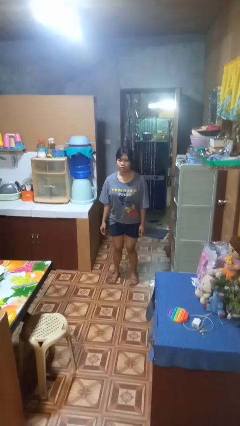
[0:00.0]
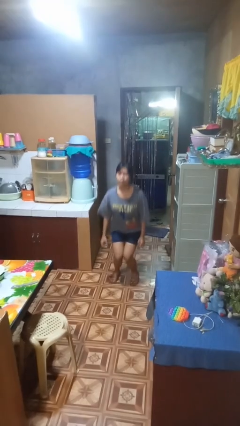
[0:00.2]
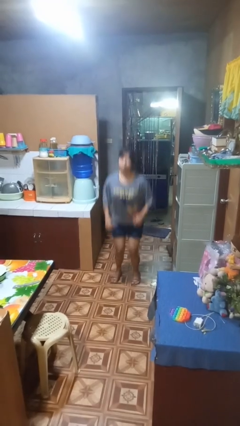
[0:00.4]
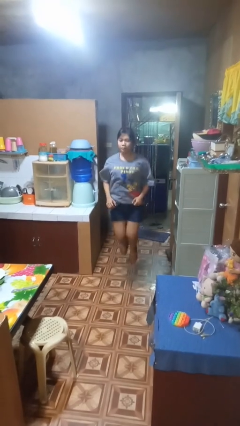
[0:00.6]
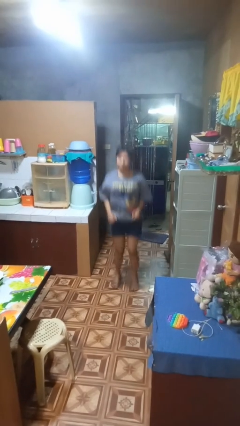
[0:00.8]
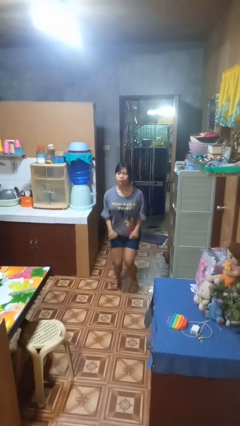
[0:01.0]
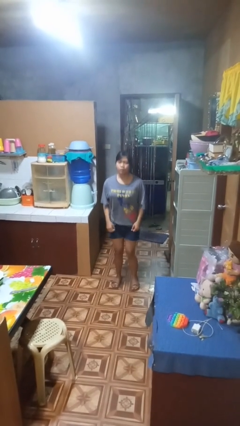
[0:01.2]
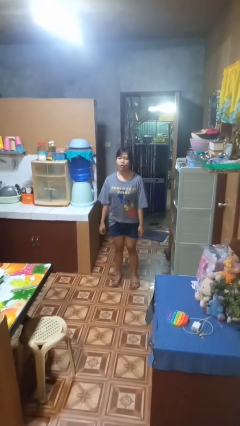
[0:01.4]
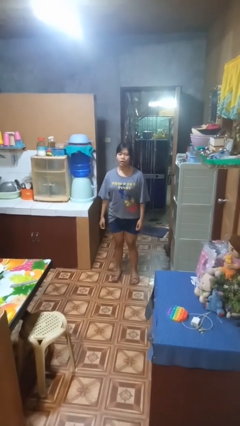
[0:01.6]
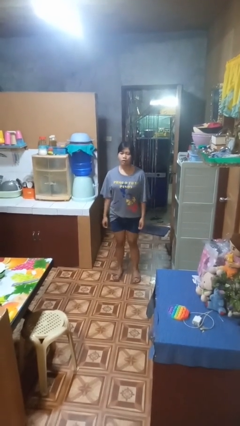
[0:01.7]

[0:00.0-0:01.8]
person jumps

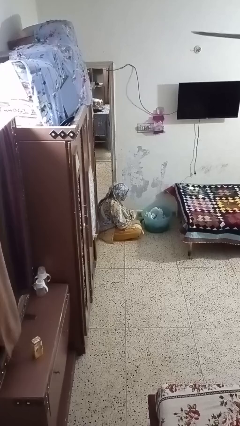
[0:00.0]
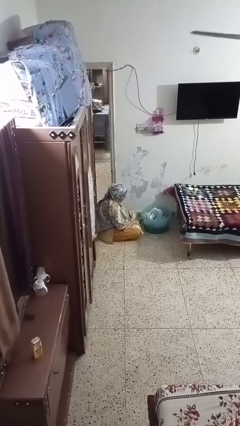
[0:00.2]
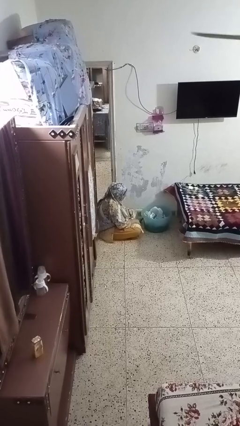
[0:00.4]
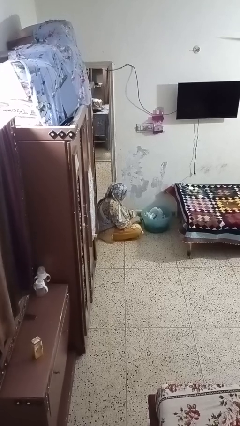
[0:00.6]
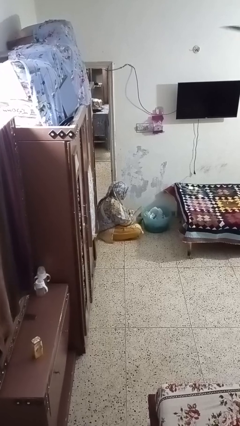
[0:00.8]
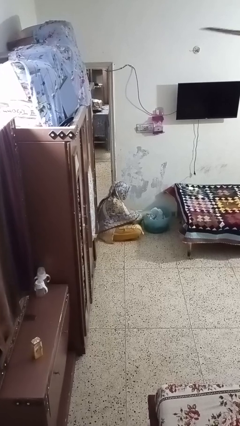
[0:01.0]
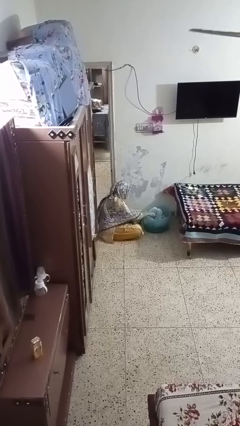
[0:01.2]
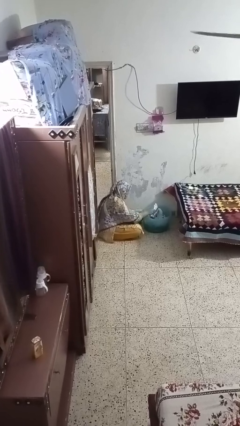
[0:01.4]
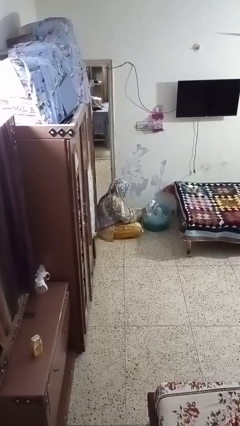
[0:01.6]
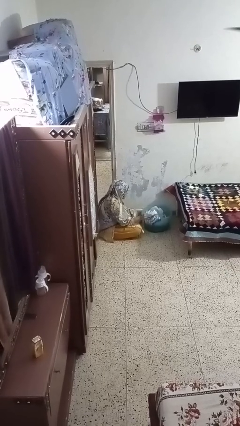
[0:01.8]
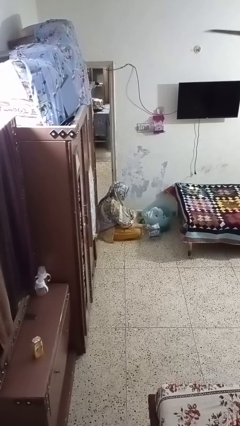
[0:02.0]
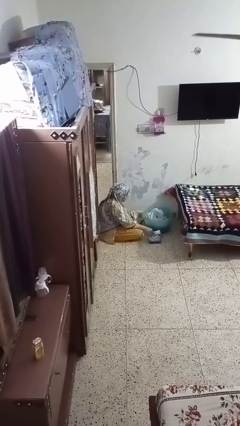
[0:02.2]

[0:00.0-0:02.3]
person takes object from basket

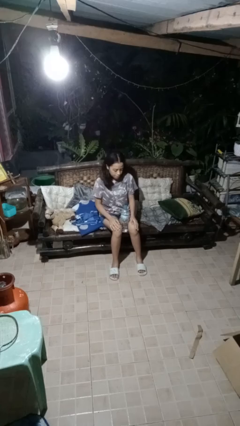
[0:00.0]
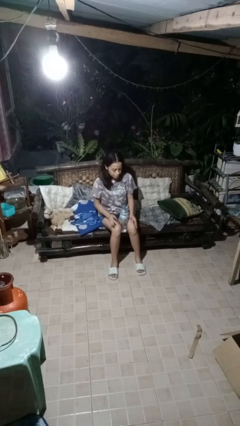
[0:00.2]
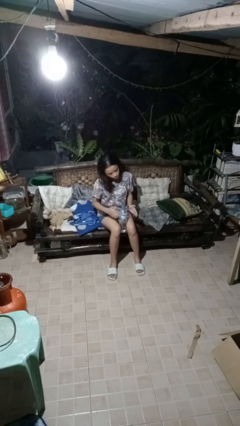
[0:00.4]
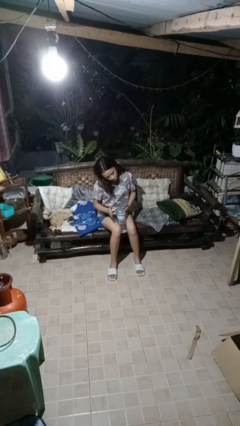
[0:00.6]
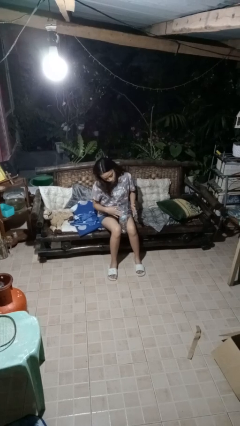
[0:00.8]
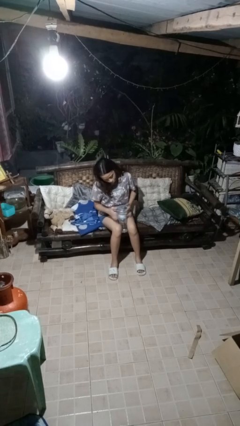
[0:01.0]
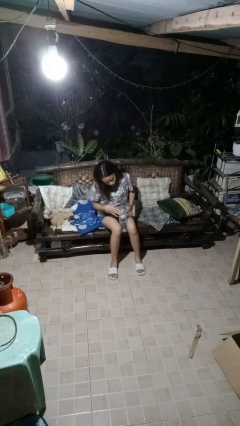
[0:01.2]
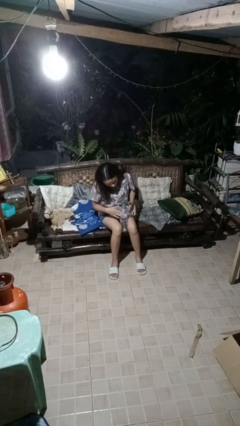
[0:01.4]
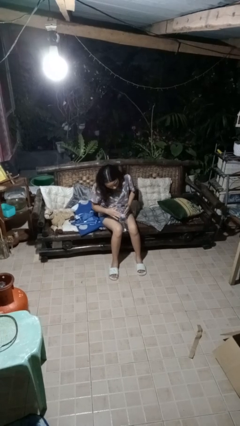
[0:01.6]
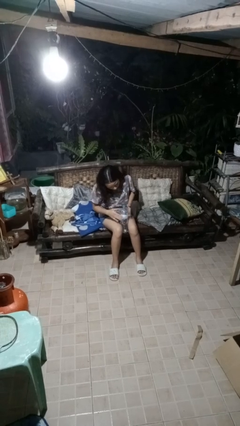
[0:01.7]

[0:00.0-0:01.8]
person taps object with finger

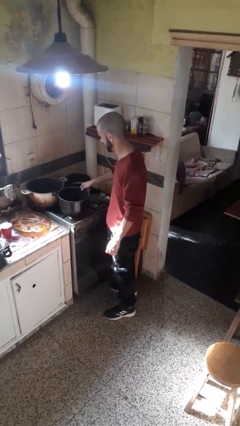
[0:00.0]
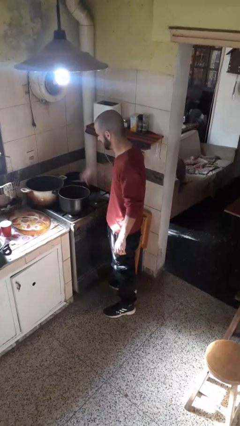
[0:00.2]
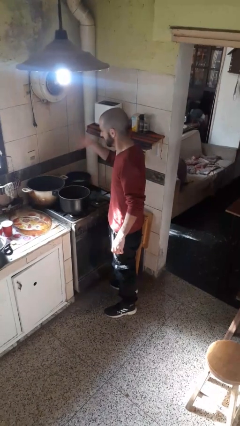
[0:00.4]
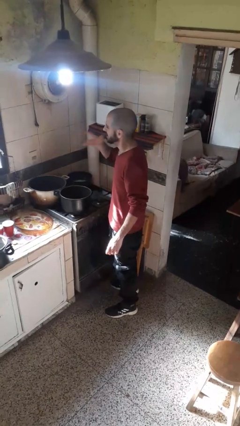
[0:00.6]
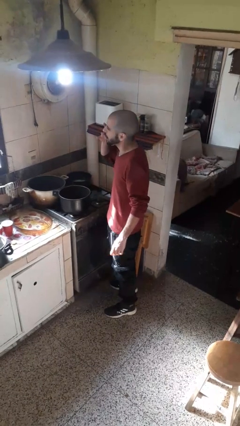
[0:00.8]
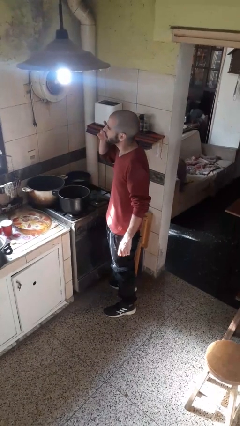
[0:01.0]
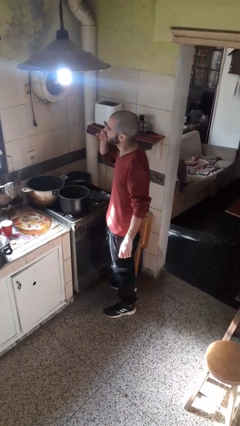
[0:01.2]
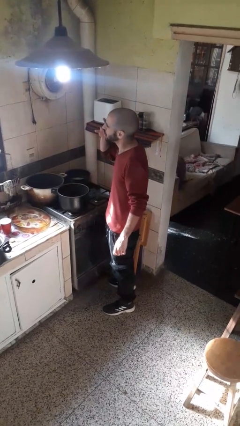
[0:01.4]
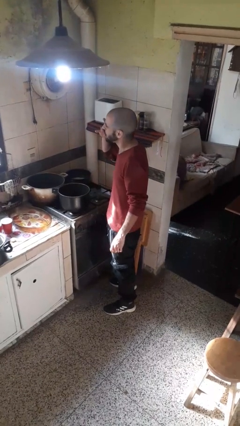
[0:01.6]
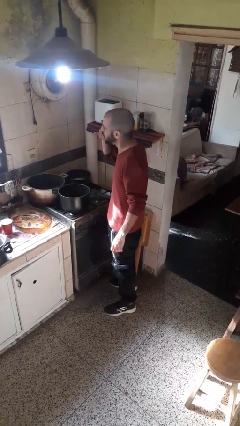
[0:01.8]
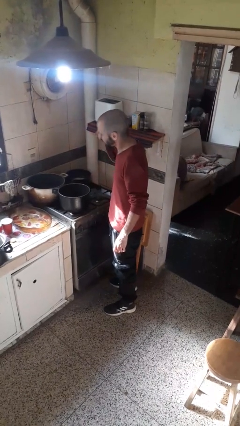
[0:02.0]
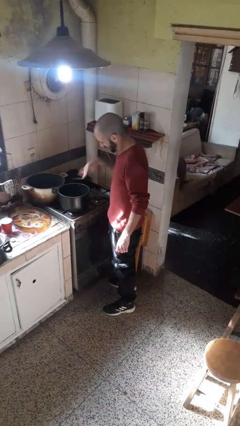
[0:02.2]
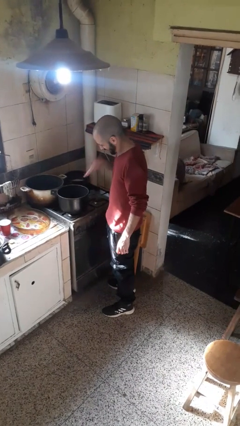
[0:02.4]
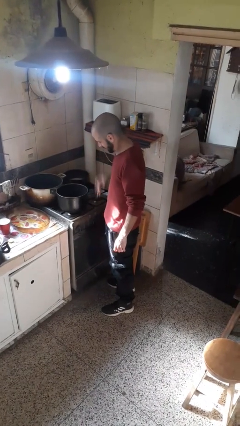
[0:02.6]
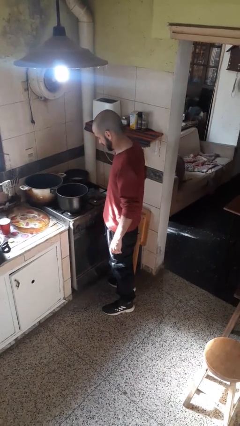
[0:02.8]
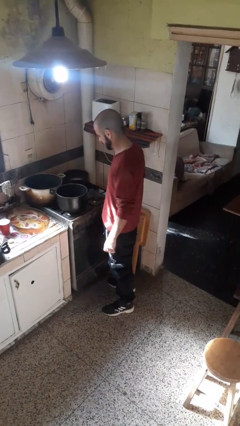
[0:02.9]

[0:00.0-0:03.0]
person burns hand

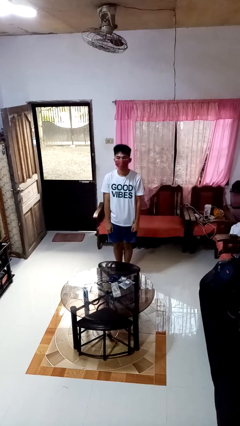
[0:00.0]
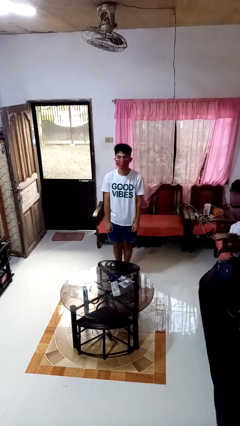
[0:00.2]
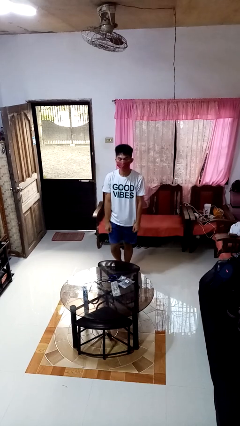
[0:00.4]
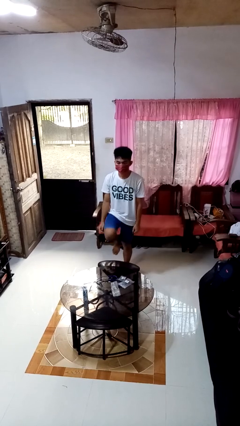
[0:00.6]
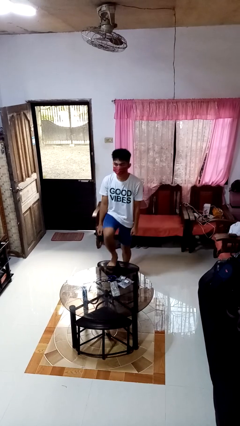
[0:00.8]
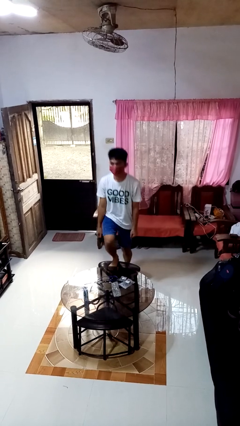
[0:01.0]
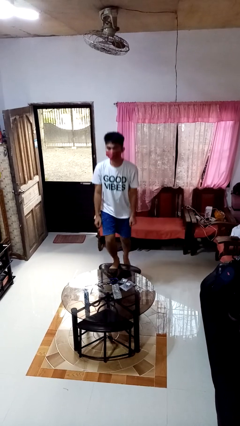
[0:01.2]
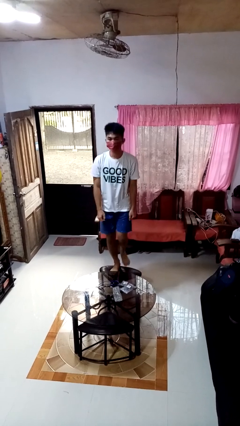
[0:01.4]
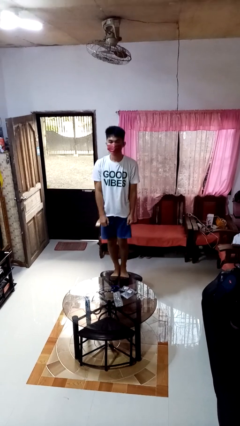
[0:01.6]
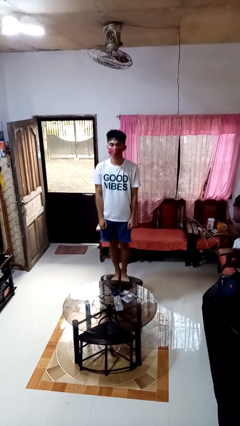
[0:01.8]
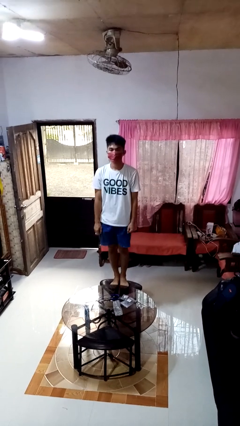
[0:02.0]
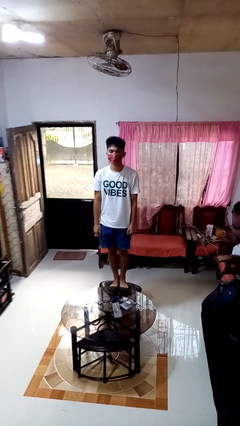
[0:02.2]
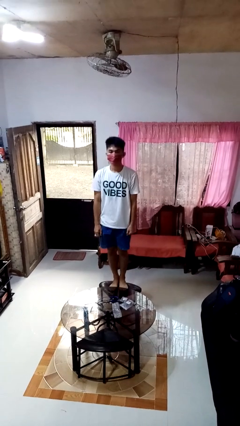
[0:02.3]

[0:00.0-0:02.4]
person climbs on chair

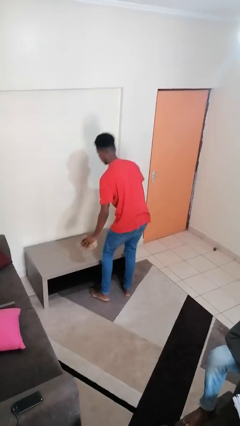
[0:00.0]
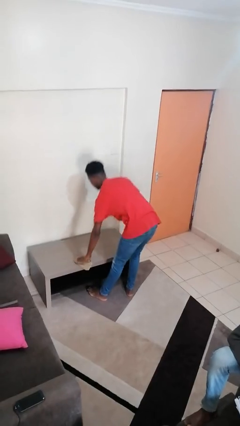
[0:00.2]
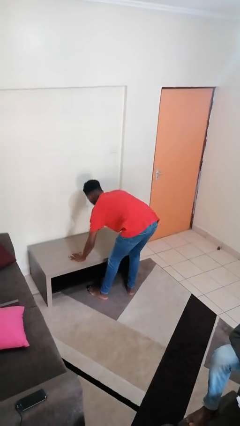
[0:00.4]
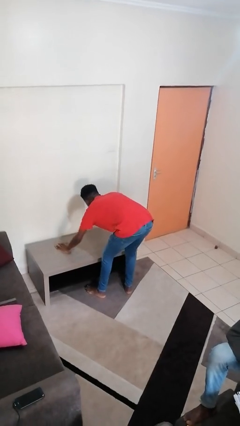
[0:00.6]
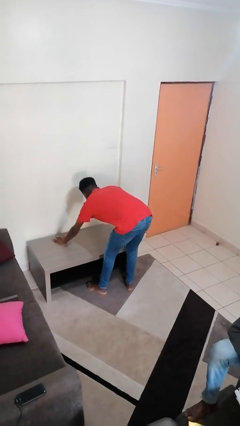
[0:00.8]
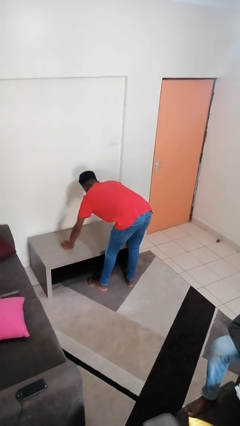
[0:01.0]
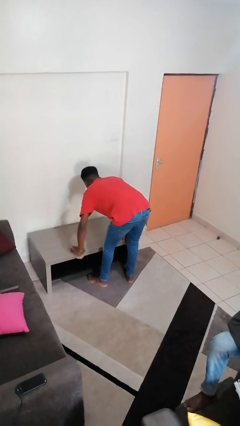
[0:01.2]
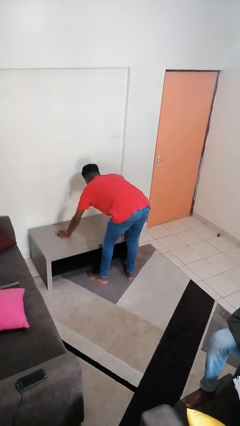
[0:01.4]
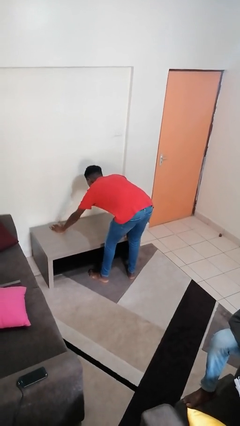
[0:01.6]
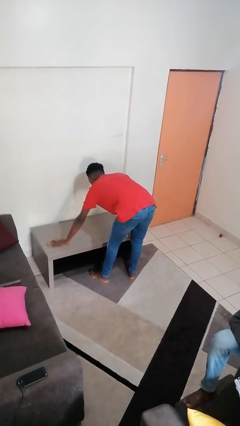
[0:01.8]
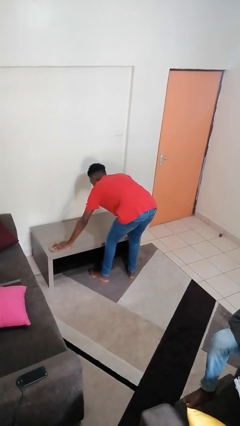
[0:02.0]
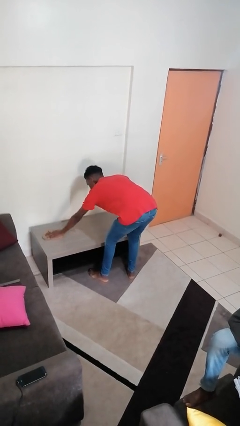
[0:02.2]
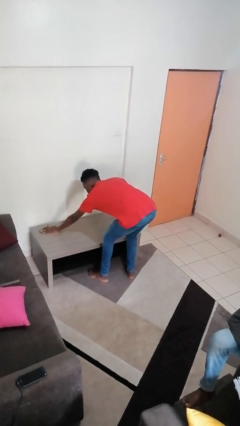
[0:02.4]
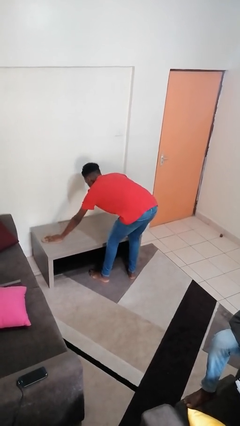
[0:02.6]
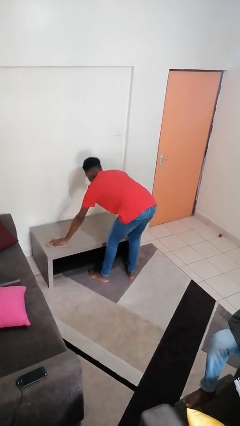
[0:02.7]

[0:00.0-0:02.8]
person cleans table with rag

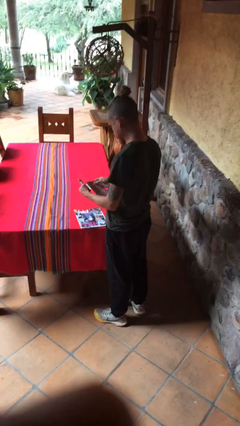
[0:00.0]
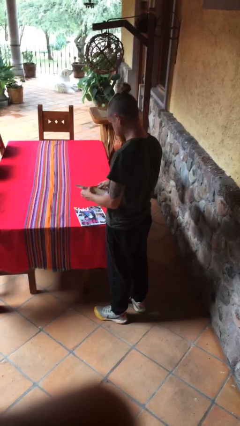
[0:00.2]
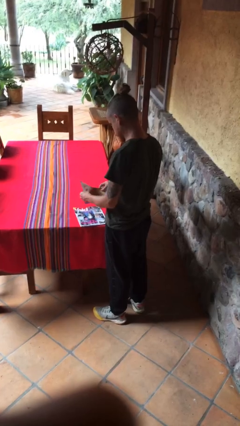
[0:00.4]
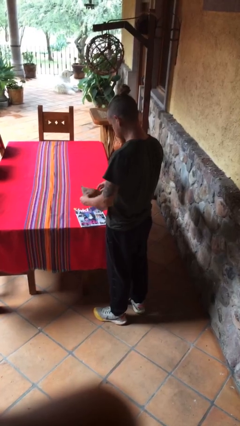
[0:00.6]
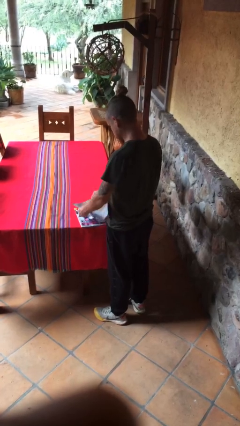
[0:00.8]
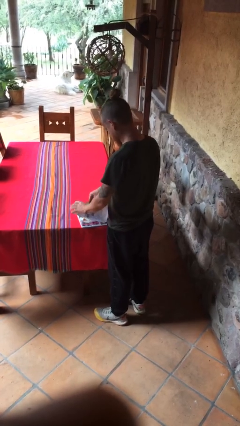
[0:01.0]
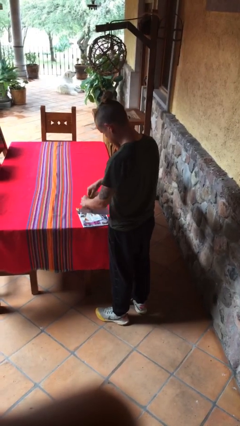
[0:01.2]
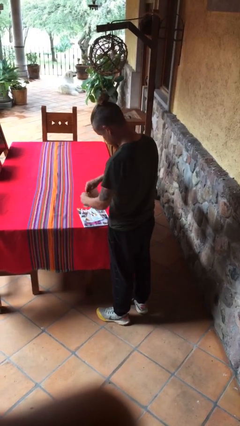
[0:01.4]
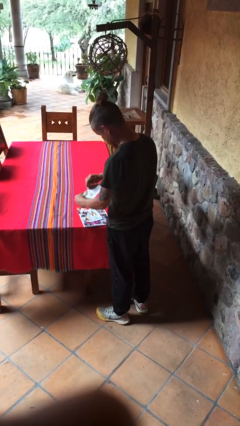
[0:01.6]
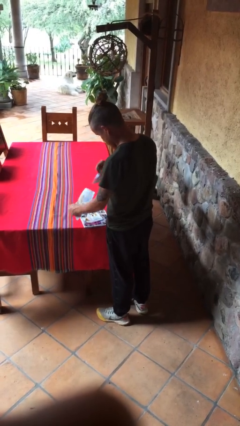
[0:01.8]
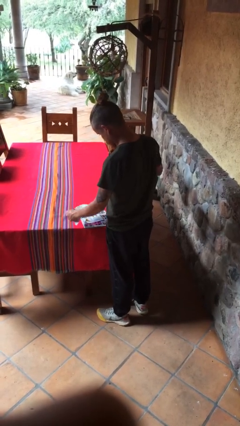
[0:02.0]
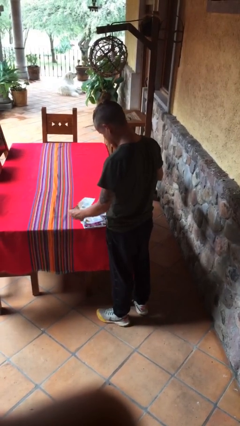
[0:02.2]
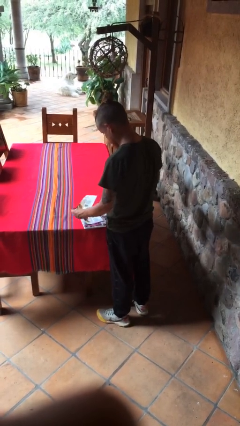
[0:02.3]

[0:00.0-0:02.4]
person tears paper

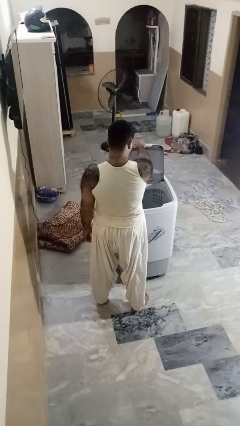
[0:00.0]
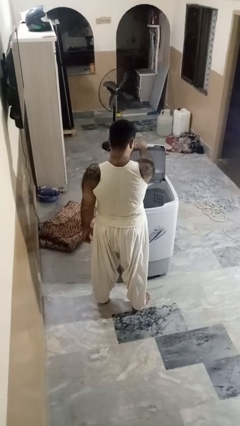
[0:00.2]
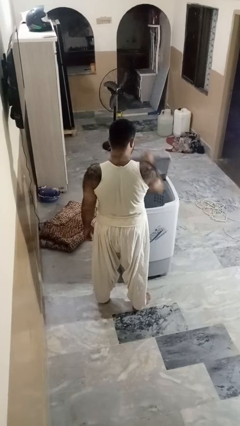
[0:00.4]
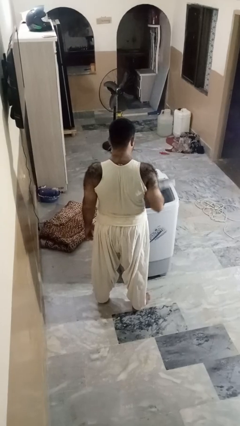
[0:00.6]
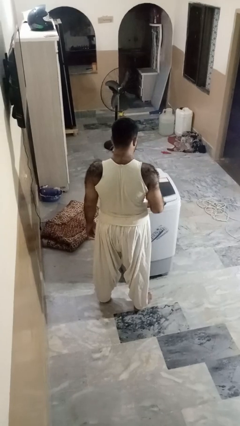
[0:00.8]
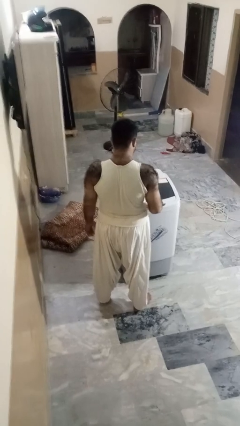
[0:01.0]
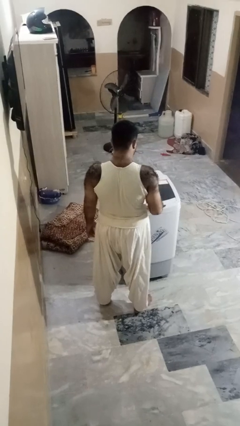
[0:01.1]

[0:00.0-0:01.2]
person closes clothes washer
